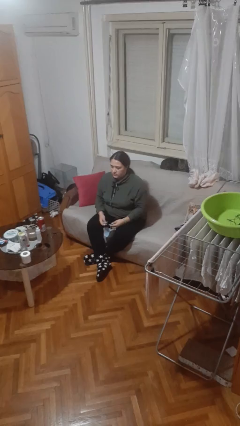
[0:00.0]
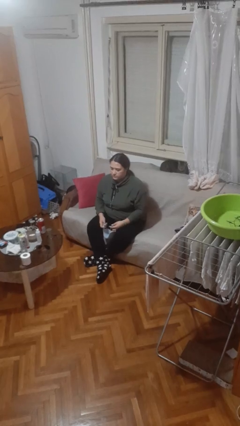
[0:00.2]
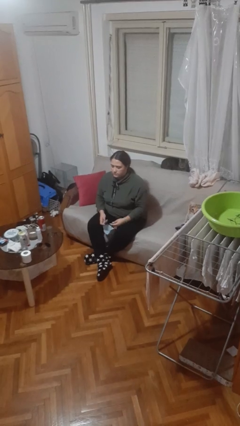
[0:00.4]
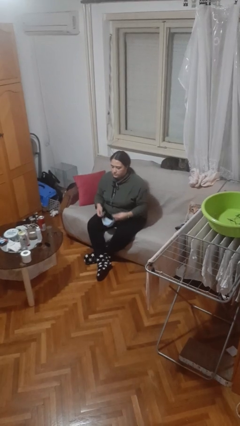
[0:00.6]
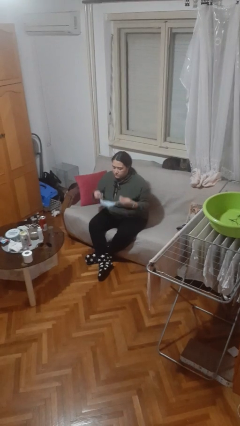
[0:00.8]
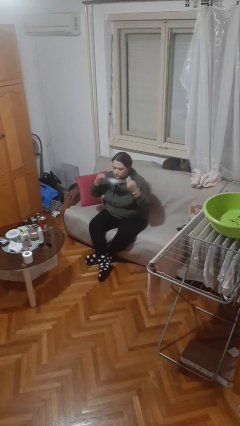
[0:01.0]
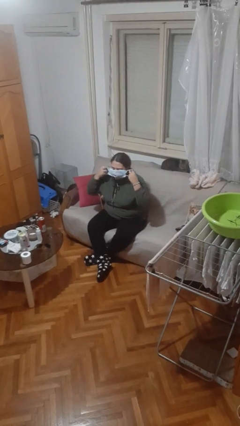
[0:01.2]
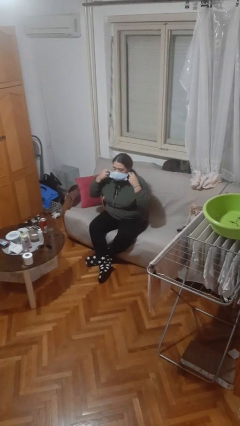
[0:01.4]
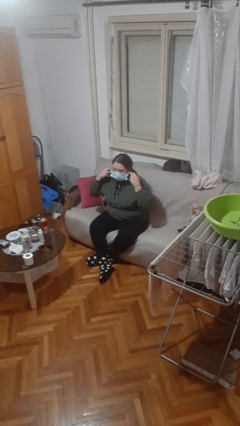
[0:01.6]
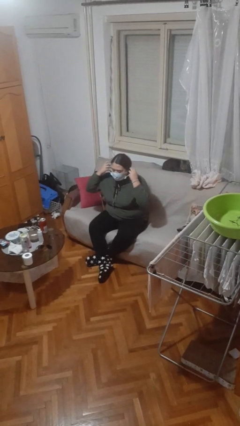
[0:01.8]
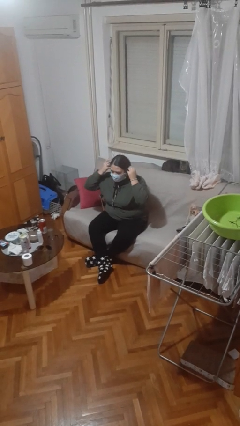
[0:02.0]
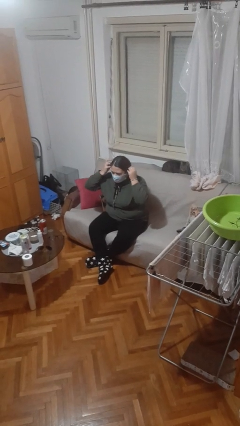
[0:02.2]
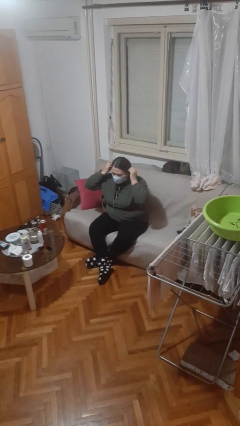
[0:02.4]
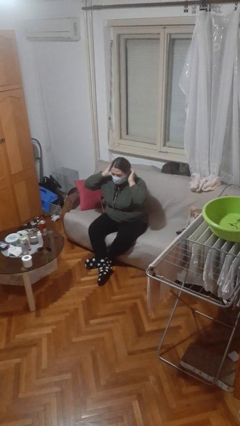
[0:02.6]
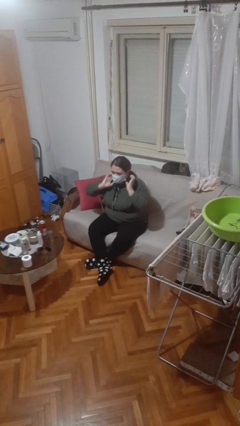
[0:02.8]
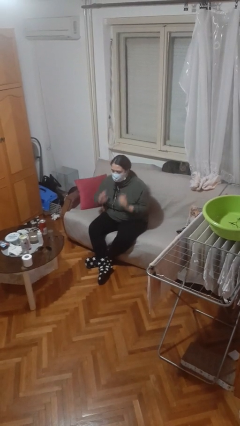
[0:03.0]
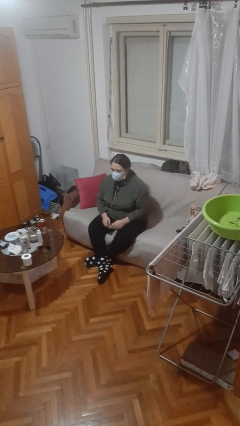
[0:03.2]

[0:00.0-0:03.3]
person puts on facemask

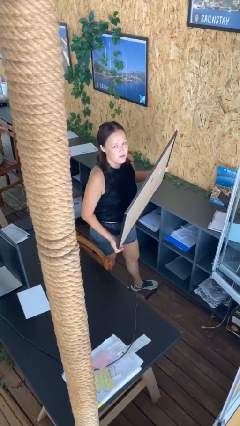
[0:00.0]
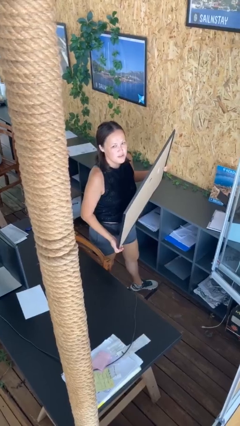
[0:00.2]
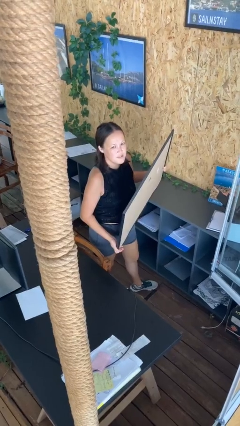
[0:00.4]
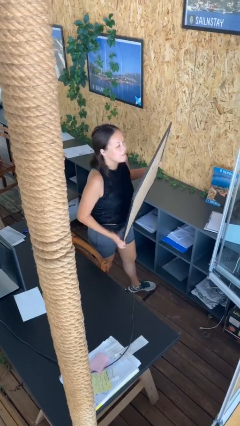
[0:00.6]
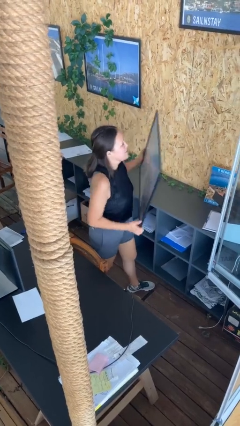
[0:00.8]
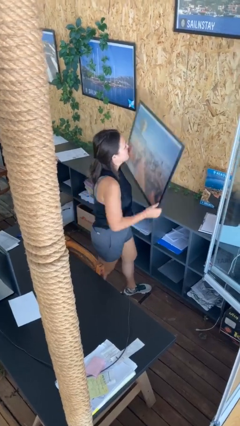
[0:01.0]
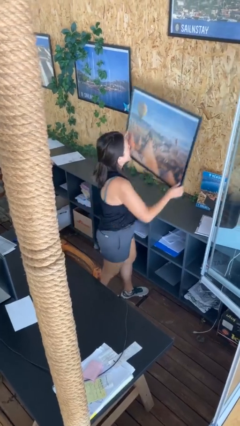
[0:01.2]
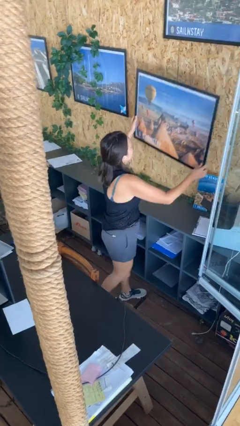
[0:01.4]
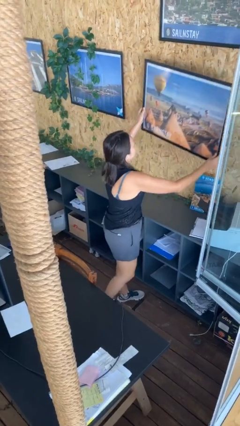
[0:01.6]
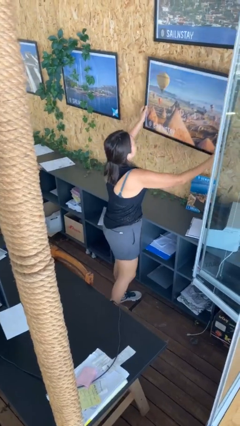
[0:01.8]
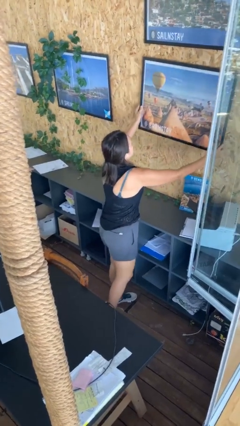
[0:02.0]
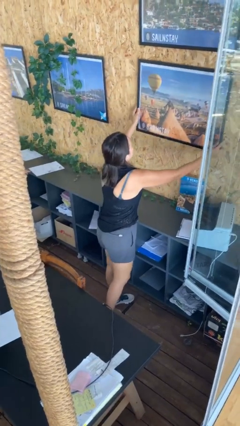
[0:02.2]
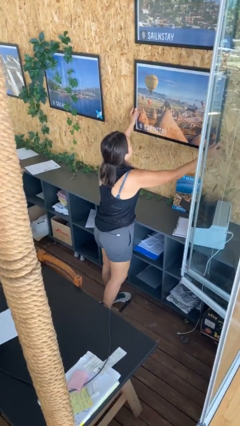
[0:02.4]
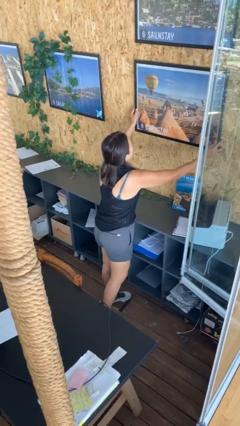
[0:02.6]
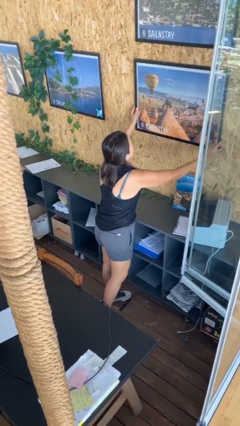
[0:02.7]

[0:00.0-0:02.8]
person puts up picture frame

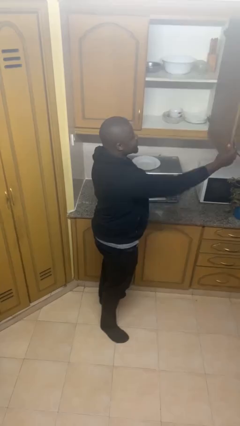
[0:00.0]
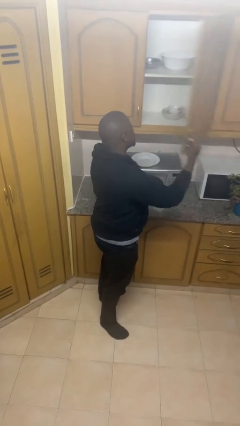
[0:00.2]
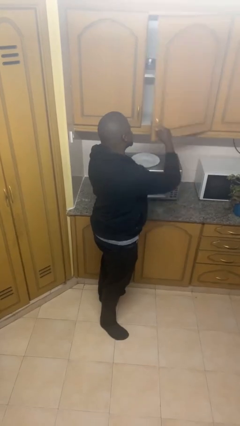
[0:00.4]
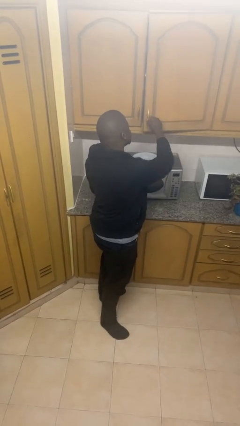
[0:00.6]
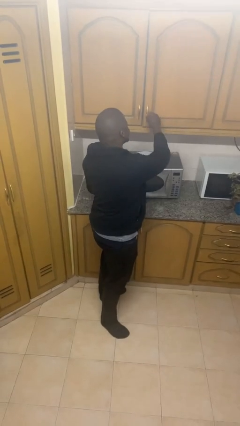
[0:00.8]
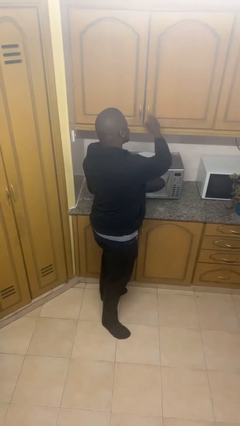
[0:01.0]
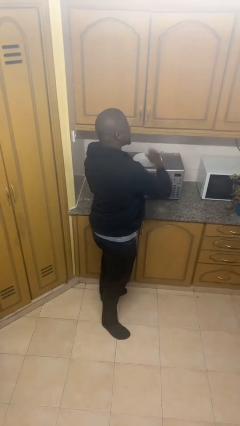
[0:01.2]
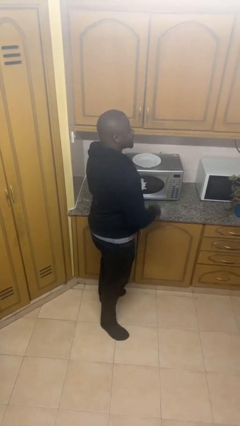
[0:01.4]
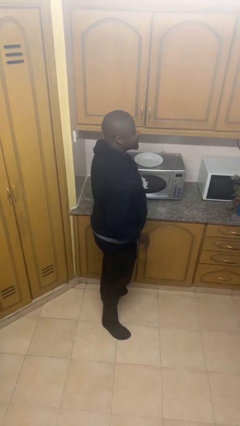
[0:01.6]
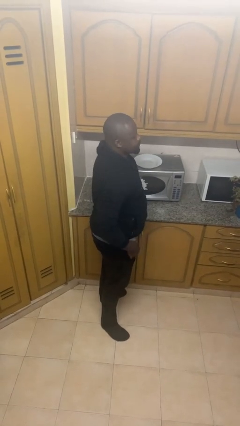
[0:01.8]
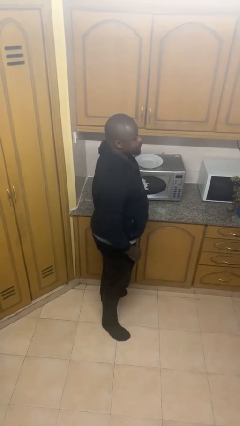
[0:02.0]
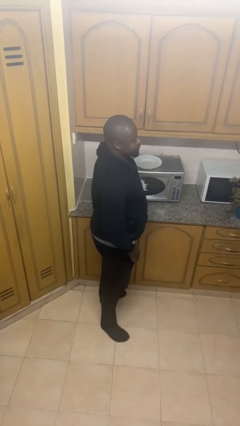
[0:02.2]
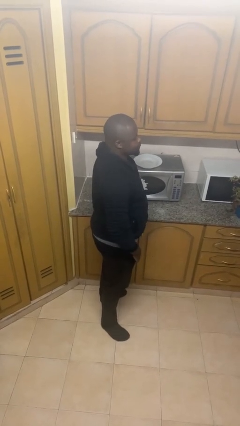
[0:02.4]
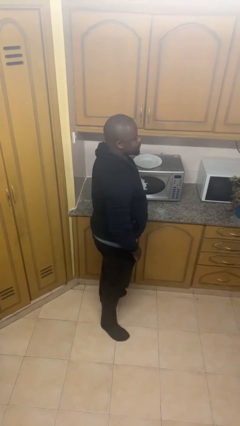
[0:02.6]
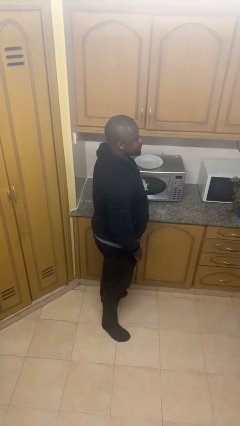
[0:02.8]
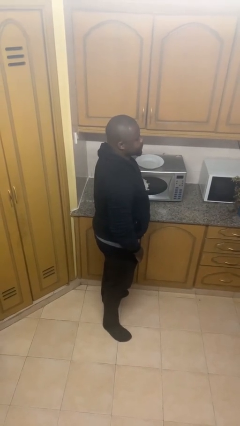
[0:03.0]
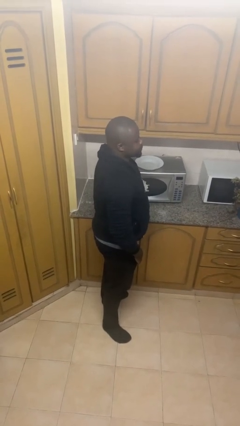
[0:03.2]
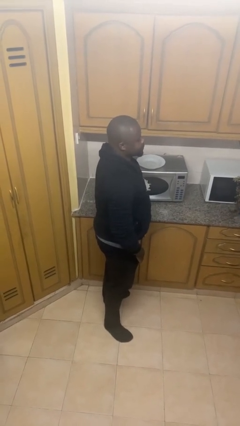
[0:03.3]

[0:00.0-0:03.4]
person closes cabinet

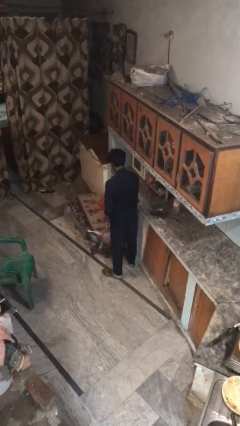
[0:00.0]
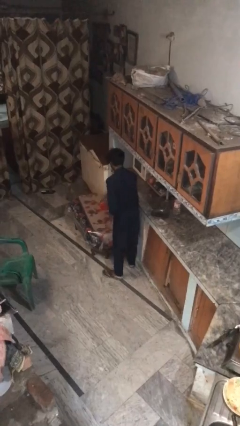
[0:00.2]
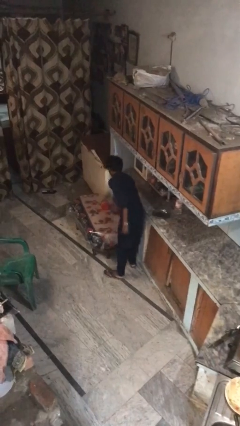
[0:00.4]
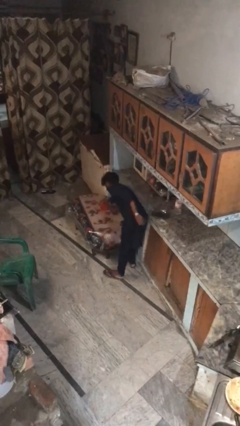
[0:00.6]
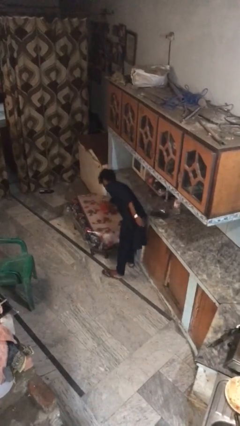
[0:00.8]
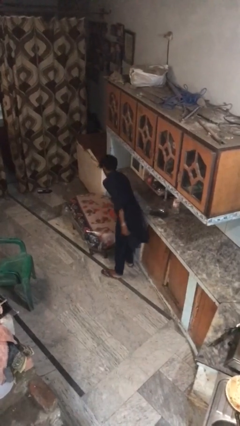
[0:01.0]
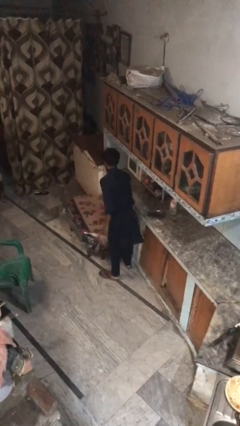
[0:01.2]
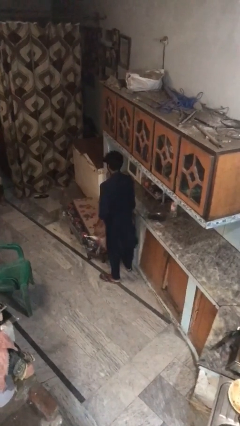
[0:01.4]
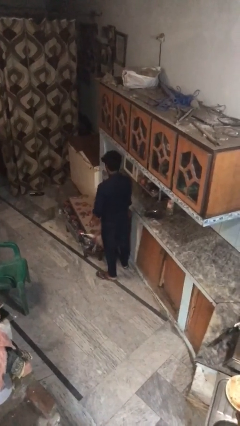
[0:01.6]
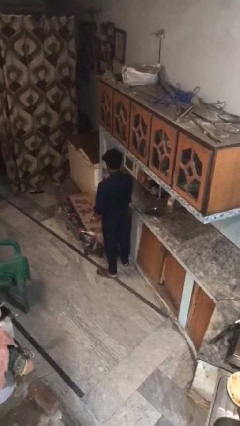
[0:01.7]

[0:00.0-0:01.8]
person picks up object from table

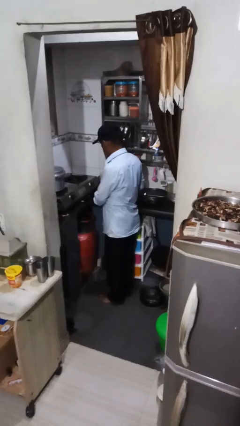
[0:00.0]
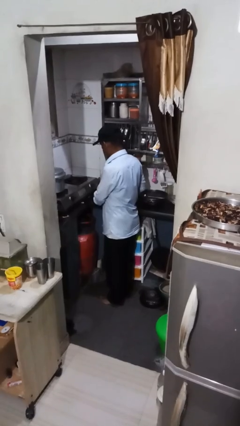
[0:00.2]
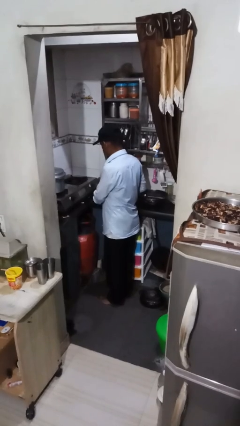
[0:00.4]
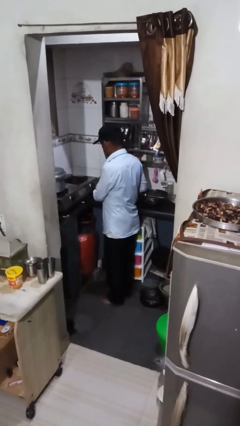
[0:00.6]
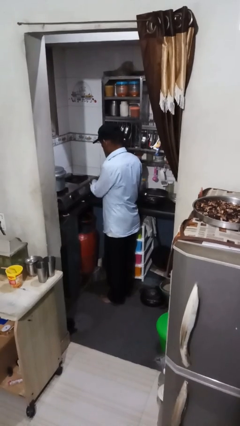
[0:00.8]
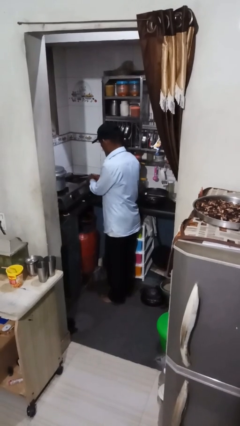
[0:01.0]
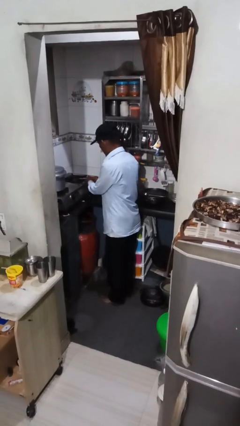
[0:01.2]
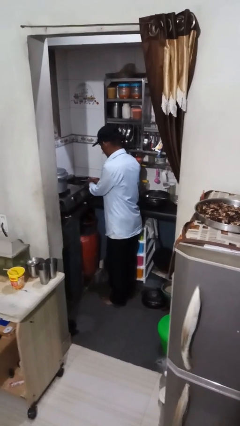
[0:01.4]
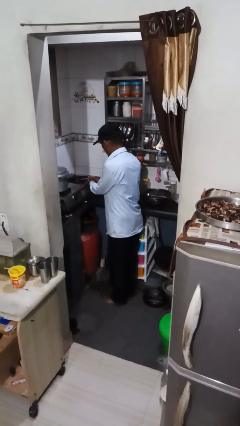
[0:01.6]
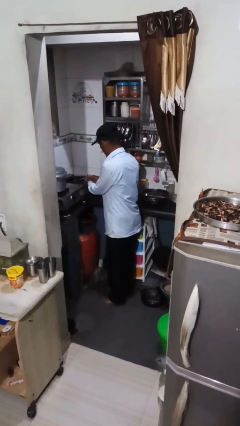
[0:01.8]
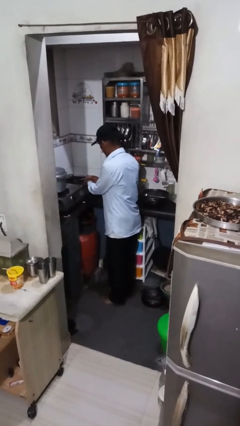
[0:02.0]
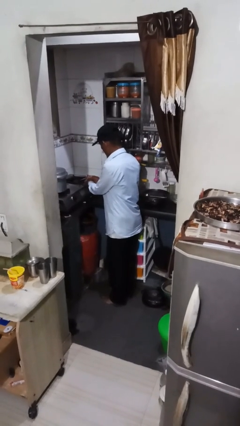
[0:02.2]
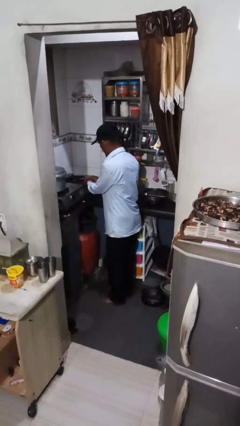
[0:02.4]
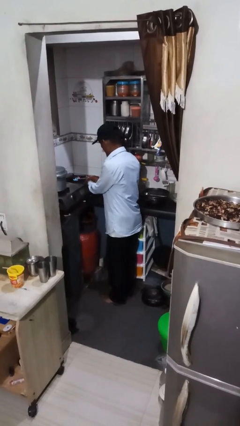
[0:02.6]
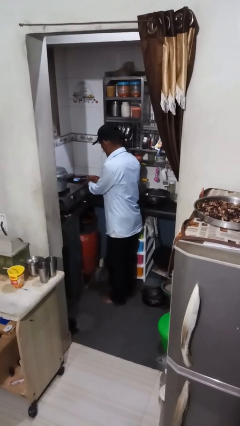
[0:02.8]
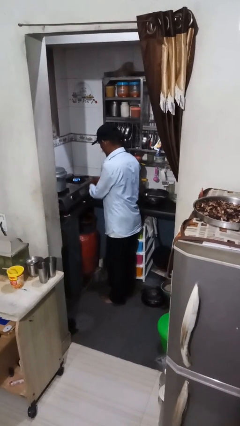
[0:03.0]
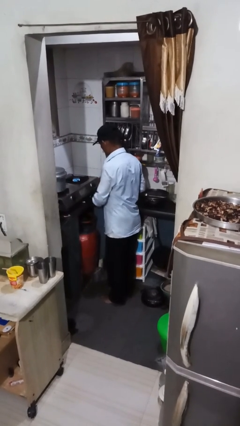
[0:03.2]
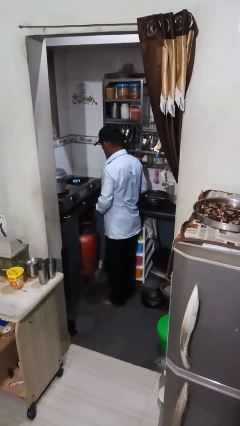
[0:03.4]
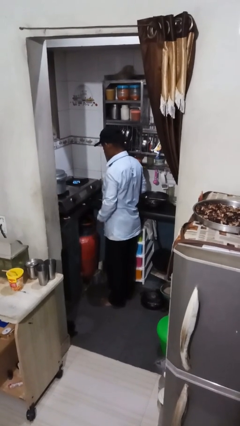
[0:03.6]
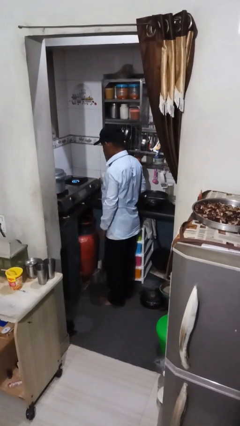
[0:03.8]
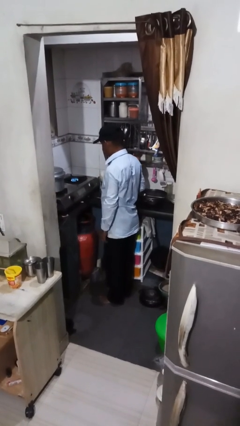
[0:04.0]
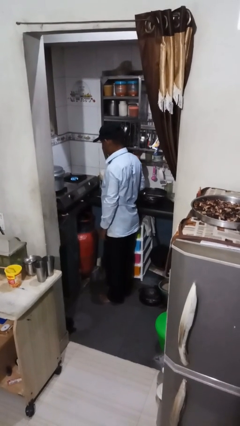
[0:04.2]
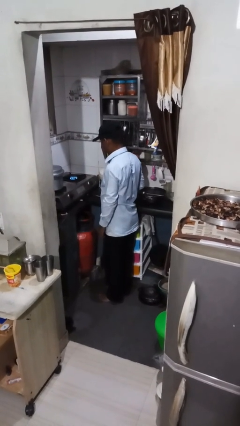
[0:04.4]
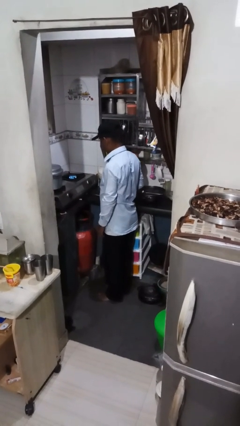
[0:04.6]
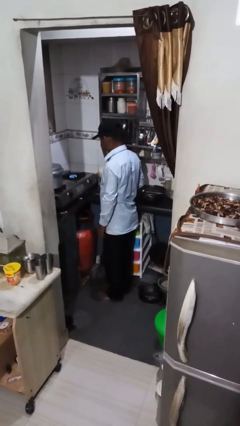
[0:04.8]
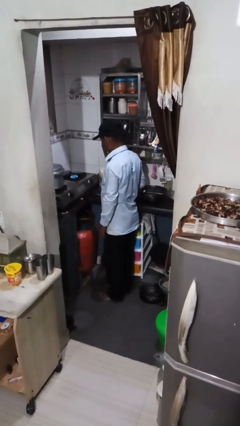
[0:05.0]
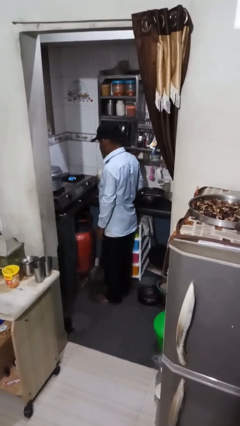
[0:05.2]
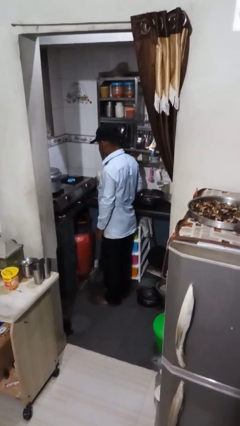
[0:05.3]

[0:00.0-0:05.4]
person turns on stovetop

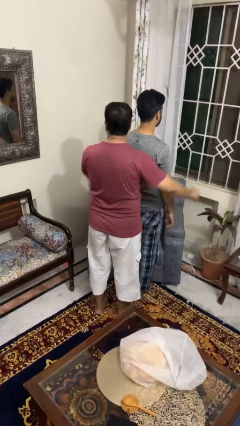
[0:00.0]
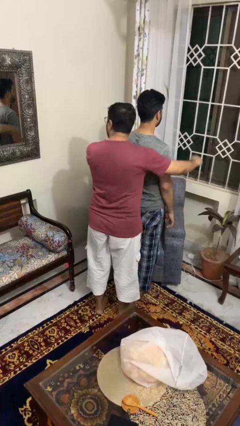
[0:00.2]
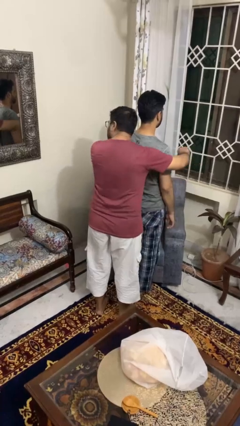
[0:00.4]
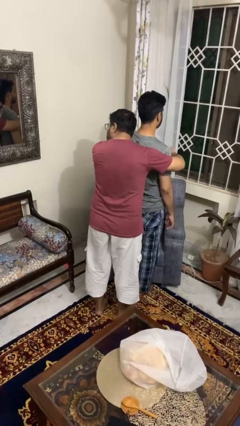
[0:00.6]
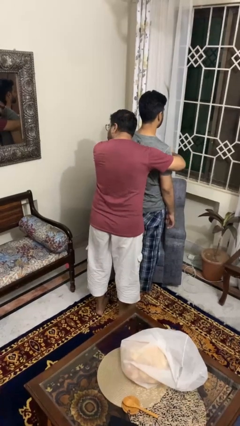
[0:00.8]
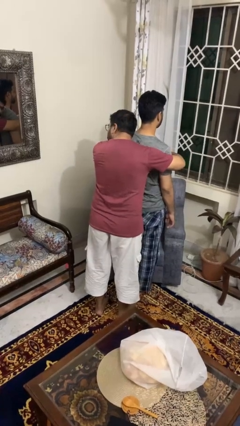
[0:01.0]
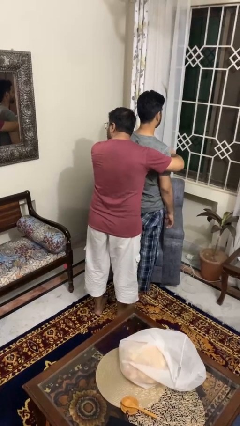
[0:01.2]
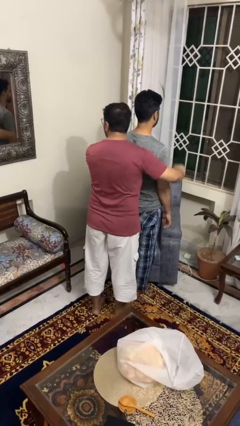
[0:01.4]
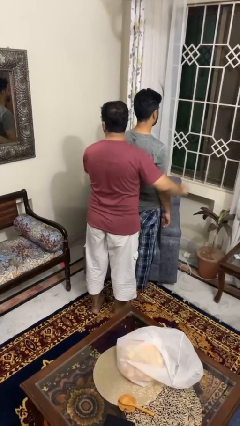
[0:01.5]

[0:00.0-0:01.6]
person hugs person from behind
